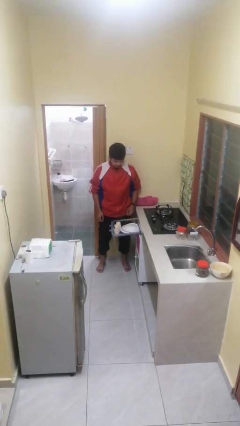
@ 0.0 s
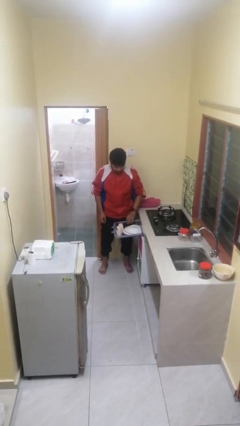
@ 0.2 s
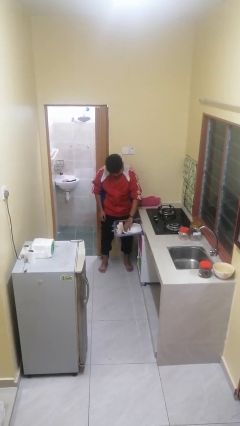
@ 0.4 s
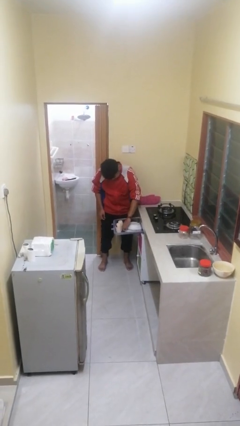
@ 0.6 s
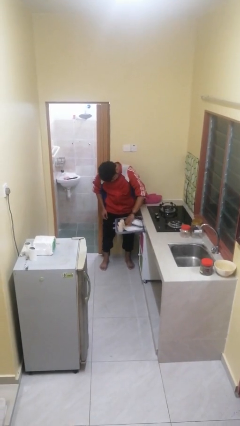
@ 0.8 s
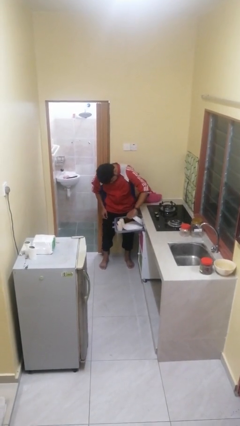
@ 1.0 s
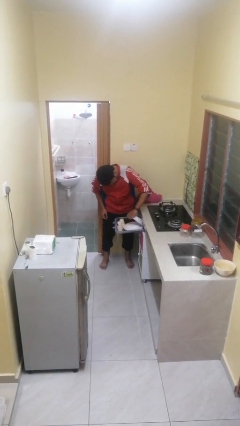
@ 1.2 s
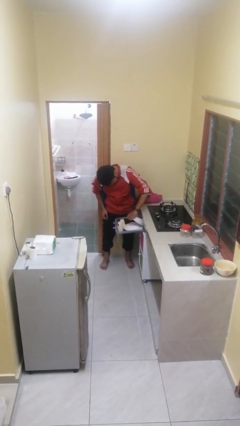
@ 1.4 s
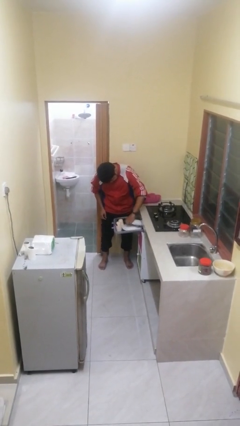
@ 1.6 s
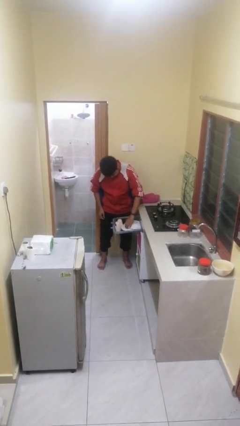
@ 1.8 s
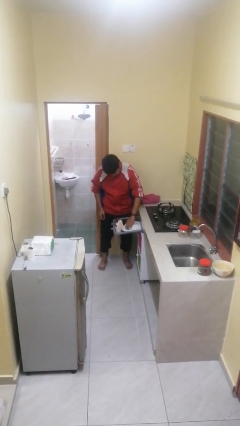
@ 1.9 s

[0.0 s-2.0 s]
person searches in kitchen drawer

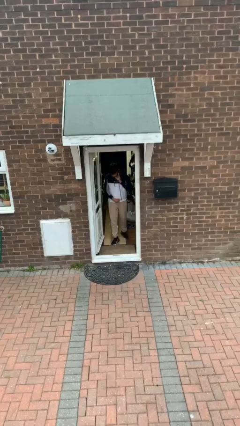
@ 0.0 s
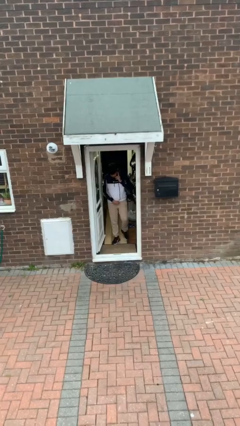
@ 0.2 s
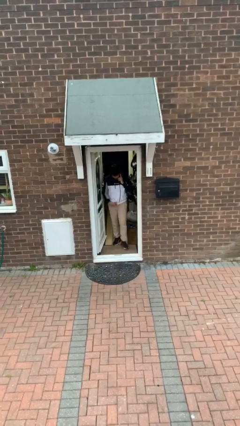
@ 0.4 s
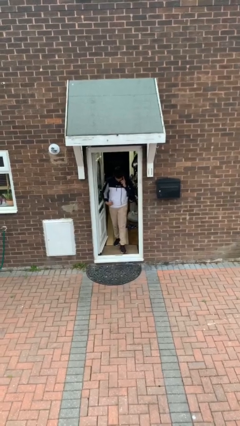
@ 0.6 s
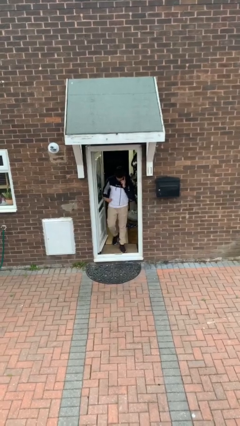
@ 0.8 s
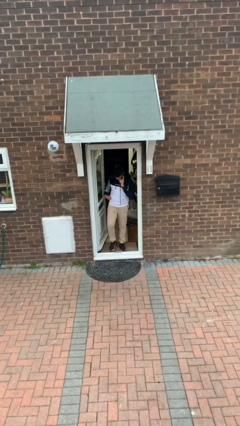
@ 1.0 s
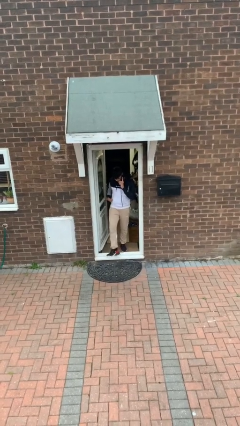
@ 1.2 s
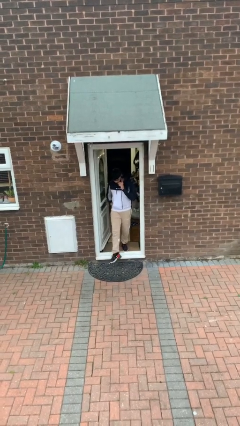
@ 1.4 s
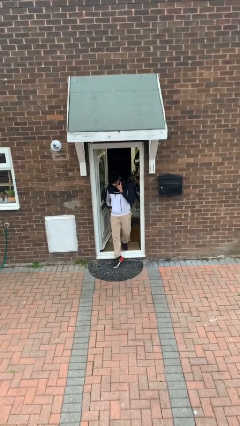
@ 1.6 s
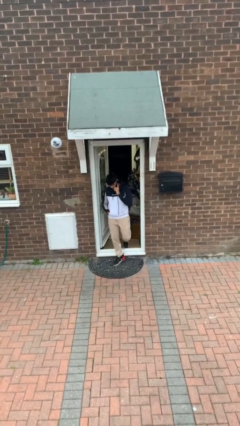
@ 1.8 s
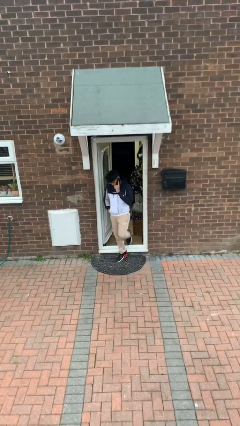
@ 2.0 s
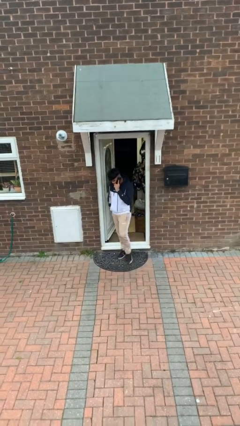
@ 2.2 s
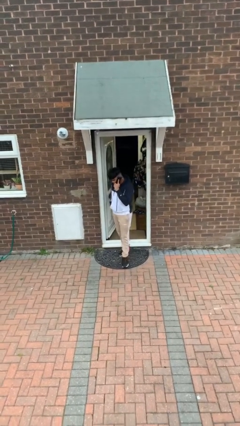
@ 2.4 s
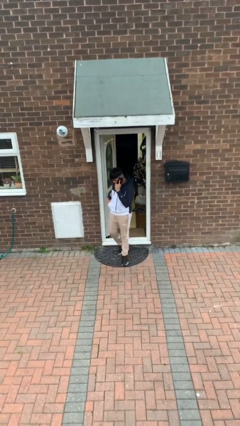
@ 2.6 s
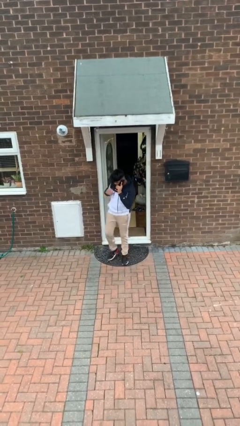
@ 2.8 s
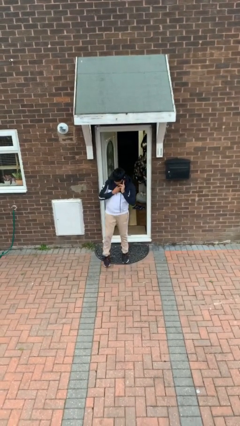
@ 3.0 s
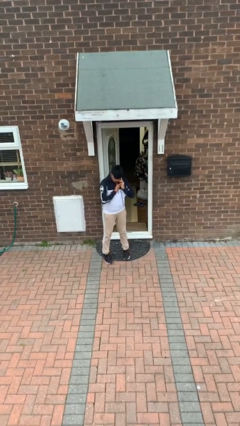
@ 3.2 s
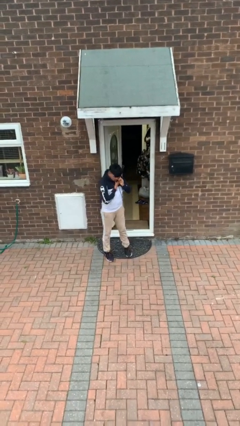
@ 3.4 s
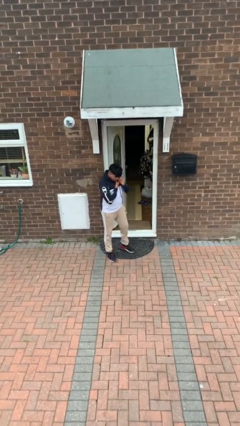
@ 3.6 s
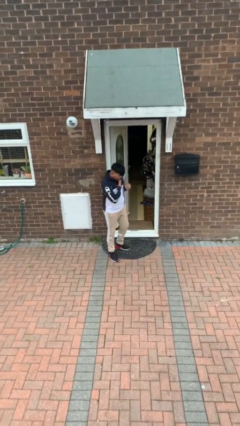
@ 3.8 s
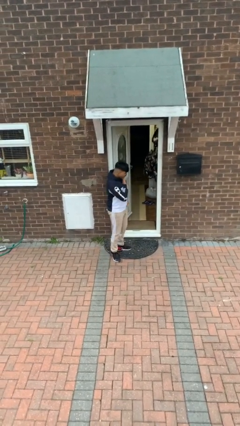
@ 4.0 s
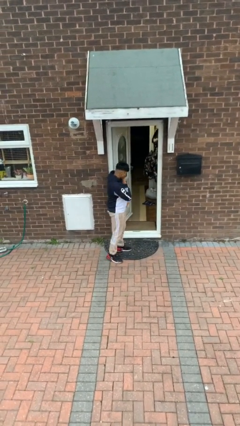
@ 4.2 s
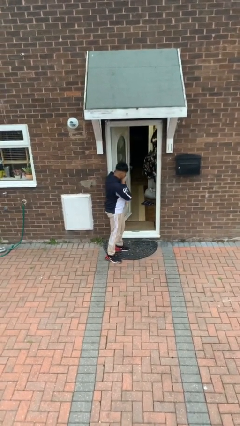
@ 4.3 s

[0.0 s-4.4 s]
person enters scene through structure

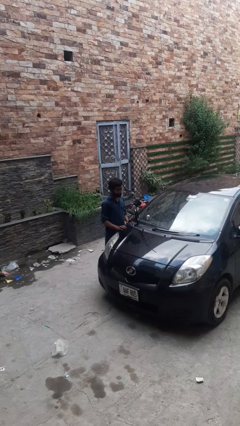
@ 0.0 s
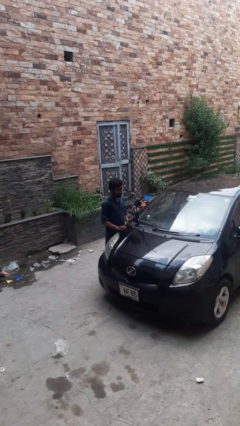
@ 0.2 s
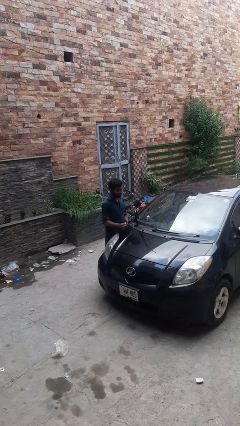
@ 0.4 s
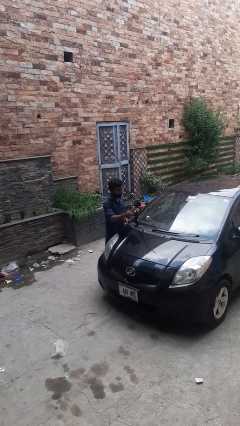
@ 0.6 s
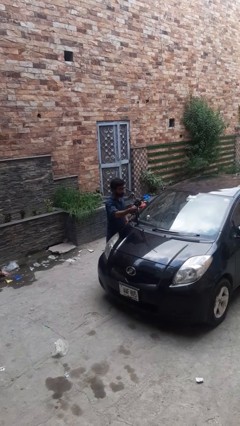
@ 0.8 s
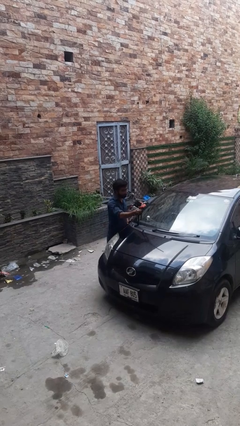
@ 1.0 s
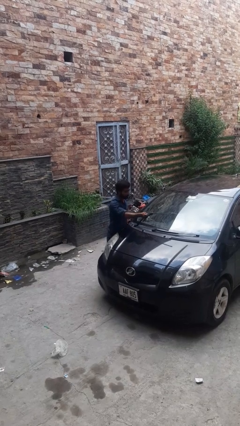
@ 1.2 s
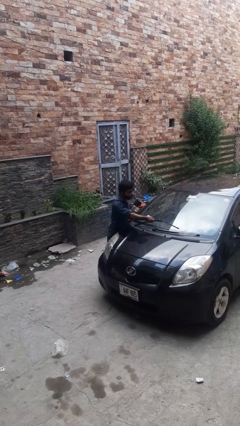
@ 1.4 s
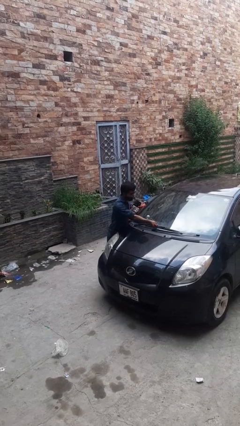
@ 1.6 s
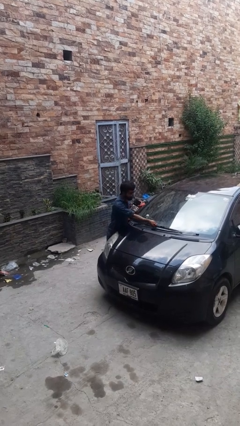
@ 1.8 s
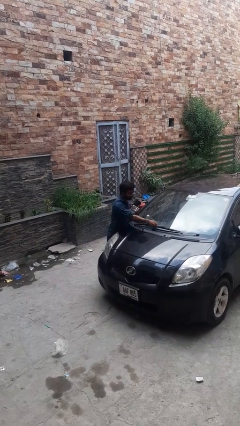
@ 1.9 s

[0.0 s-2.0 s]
person flips down car wipers

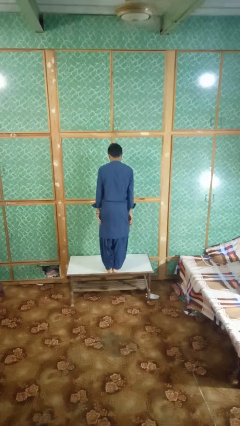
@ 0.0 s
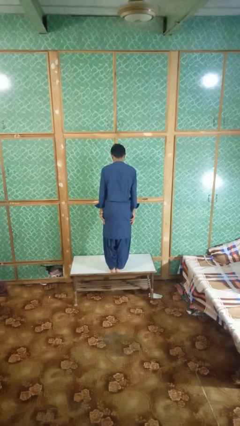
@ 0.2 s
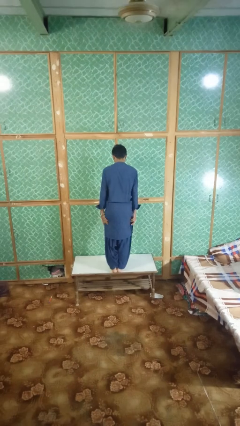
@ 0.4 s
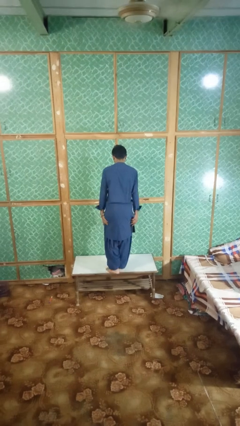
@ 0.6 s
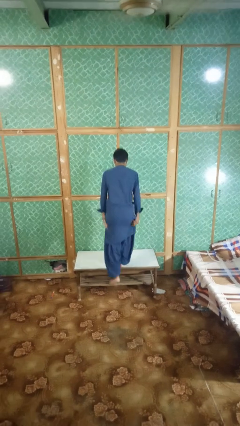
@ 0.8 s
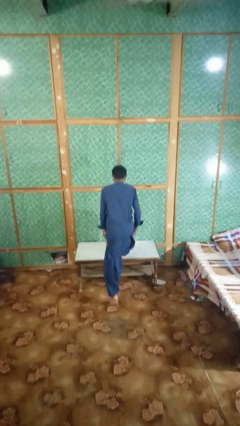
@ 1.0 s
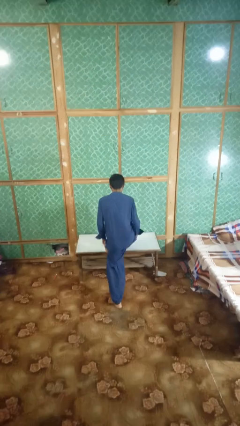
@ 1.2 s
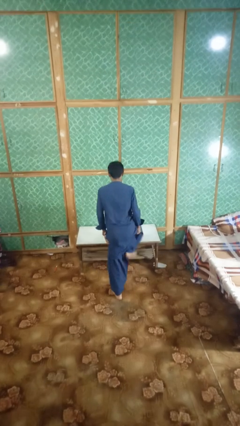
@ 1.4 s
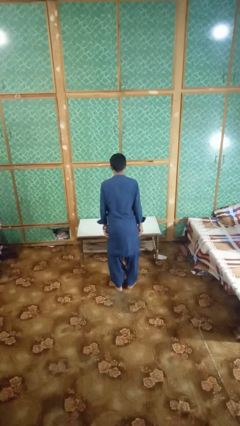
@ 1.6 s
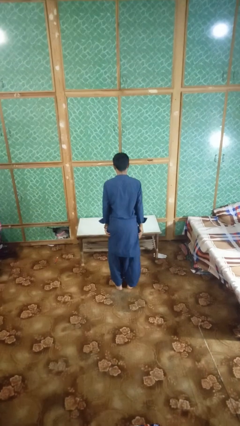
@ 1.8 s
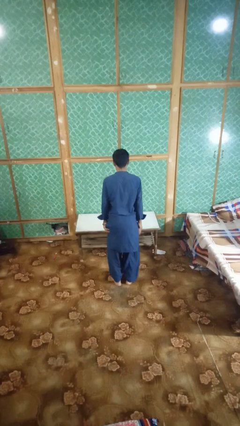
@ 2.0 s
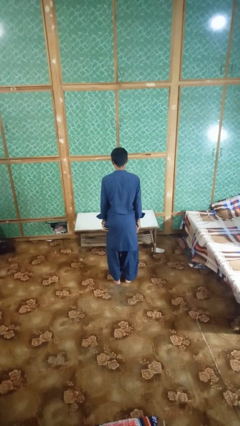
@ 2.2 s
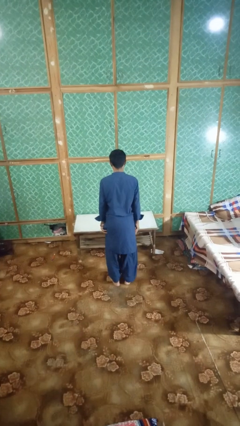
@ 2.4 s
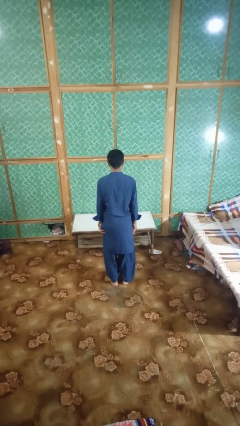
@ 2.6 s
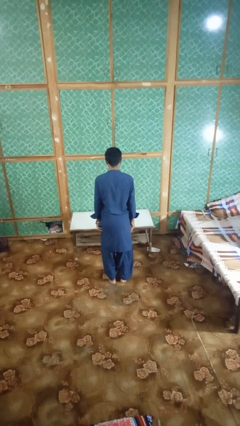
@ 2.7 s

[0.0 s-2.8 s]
person climbs off table

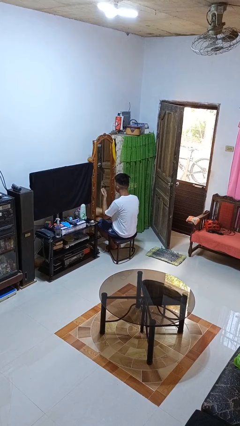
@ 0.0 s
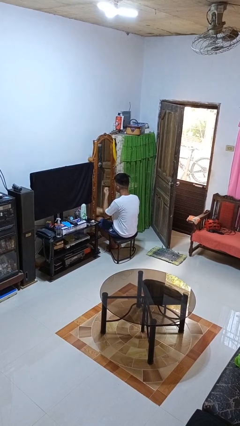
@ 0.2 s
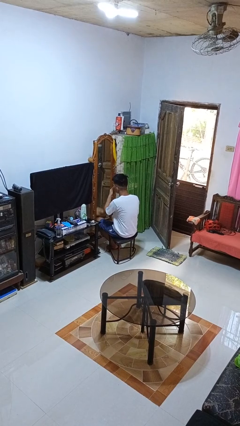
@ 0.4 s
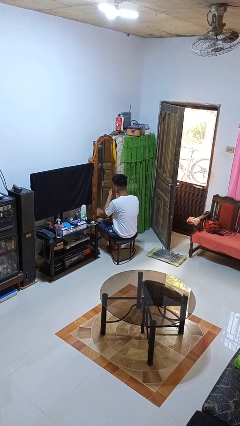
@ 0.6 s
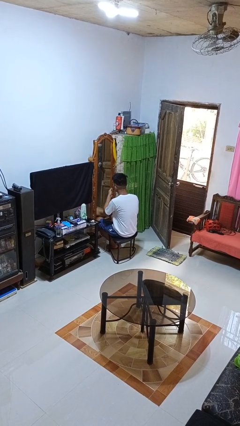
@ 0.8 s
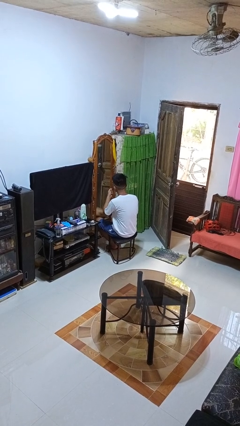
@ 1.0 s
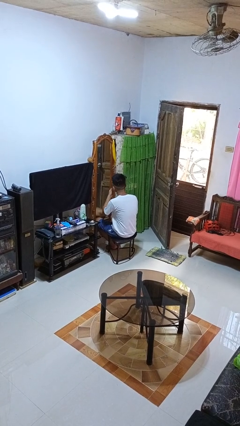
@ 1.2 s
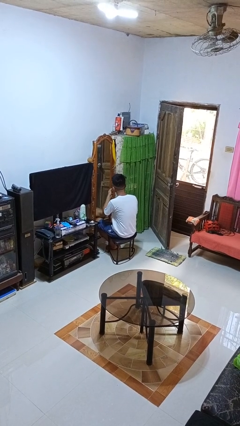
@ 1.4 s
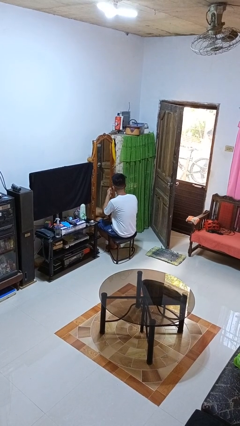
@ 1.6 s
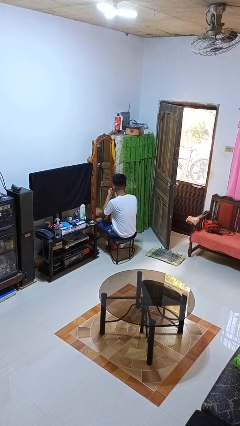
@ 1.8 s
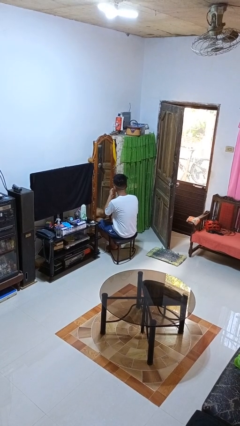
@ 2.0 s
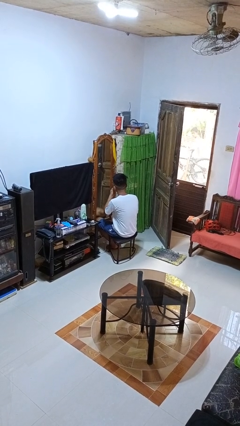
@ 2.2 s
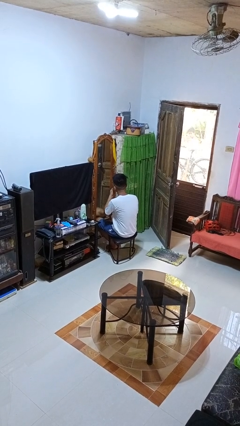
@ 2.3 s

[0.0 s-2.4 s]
person applies lip makeup

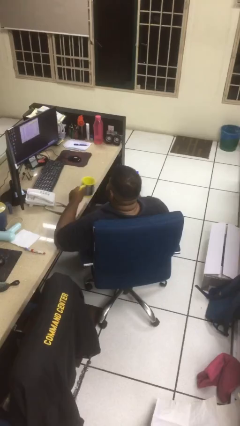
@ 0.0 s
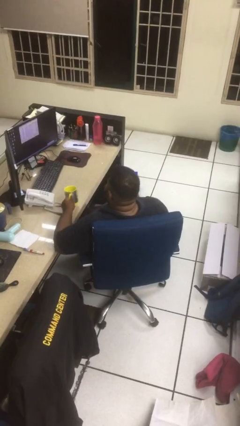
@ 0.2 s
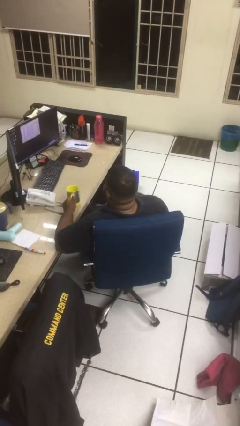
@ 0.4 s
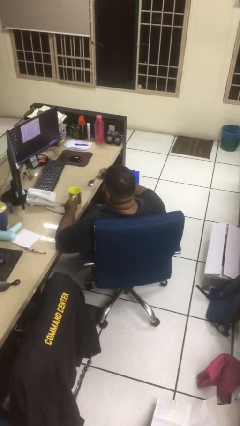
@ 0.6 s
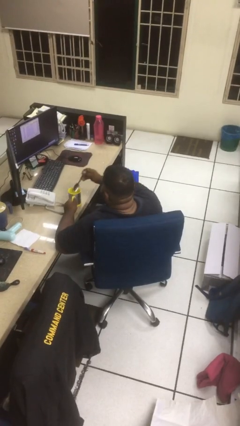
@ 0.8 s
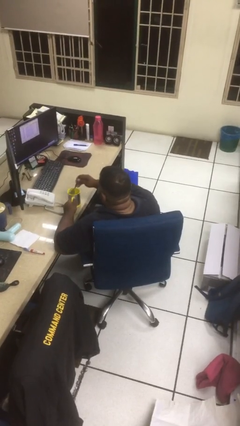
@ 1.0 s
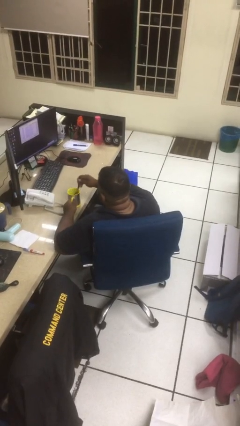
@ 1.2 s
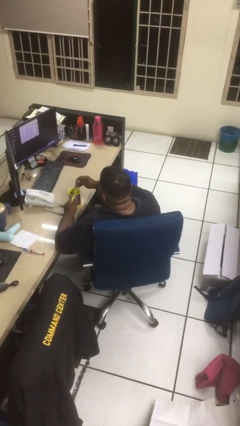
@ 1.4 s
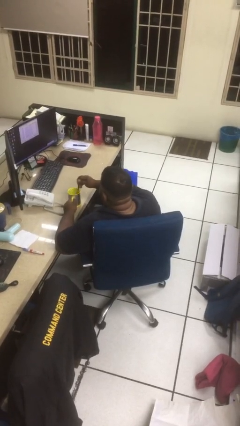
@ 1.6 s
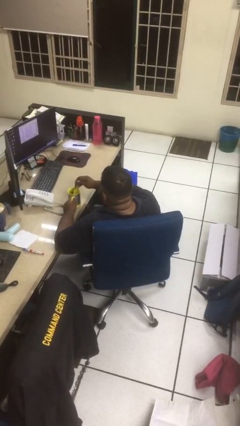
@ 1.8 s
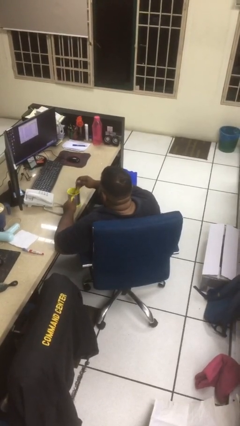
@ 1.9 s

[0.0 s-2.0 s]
person stirs mug

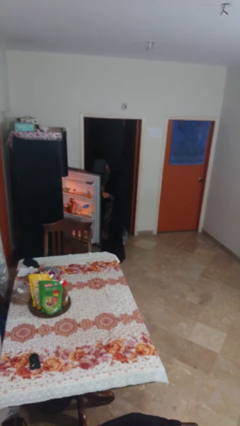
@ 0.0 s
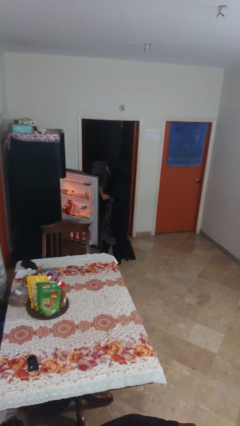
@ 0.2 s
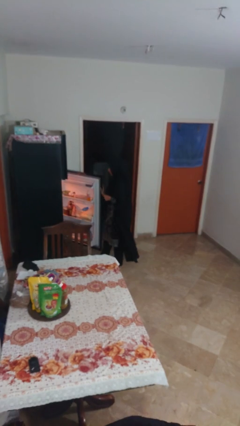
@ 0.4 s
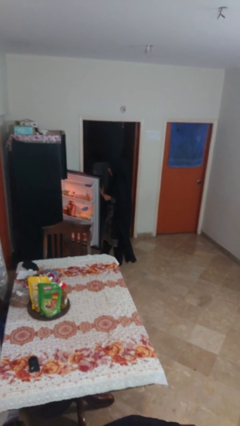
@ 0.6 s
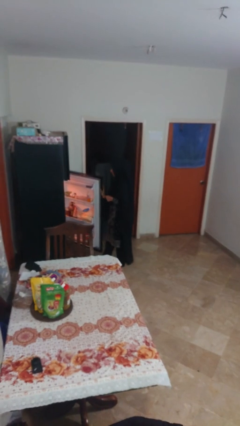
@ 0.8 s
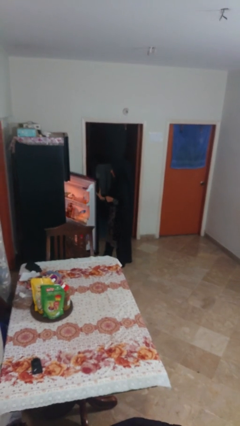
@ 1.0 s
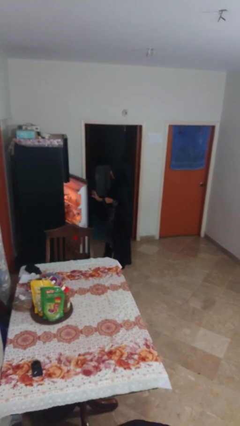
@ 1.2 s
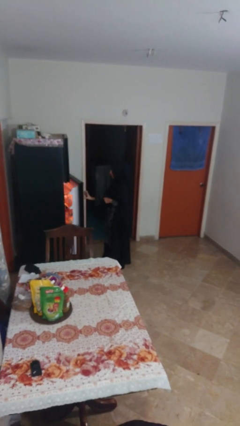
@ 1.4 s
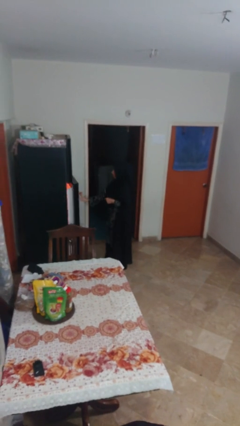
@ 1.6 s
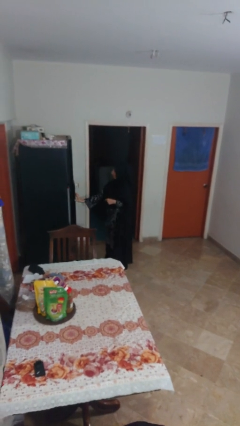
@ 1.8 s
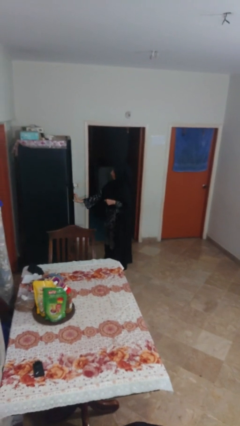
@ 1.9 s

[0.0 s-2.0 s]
person closes refrigerator
